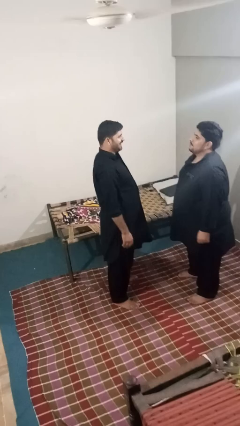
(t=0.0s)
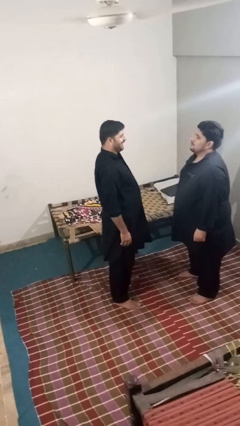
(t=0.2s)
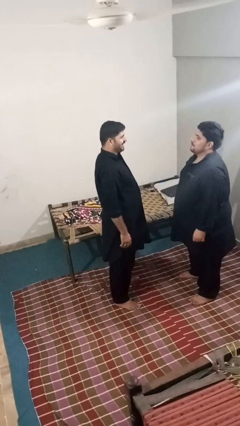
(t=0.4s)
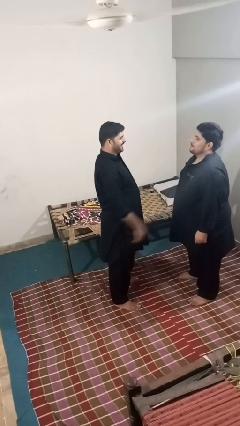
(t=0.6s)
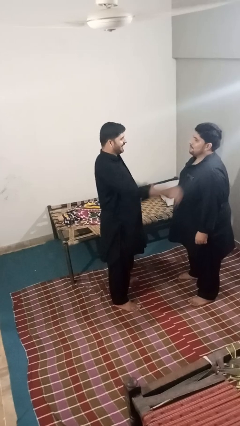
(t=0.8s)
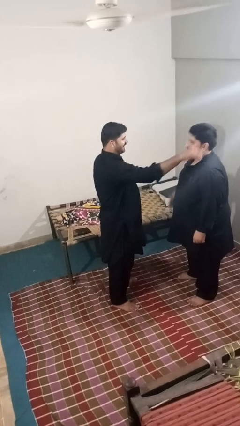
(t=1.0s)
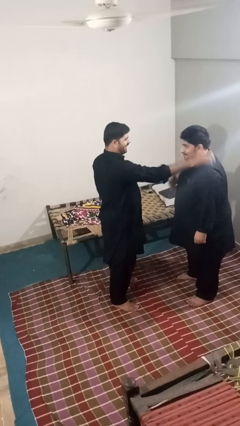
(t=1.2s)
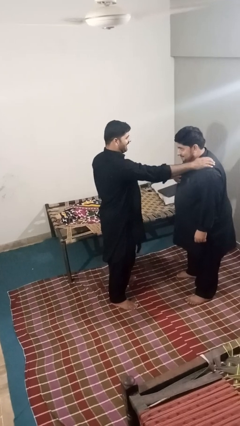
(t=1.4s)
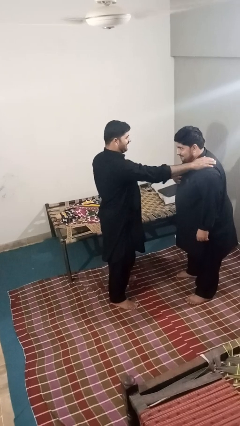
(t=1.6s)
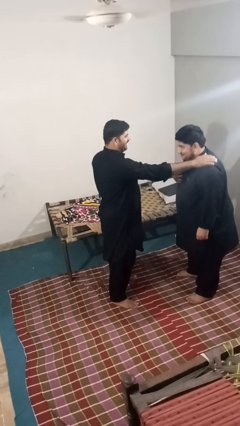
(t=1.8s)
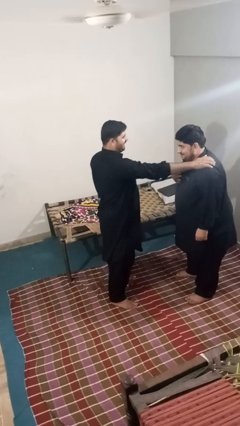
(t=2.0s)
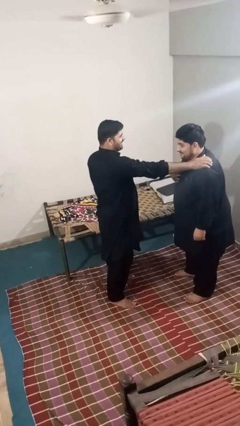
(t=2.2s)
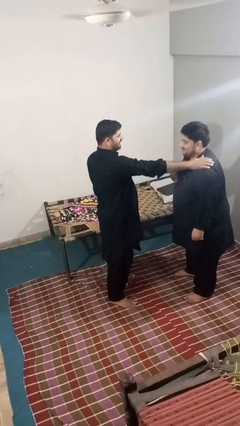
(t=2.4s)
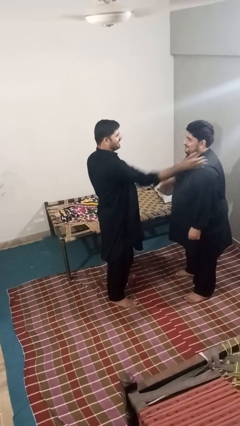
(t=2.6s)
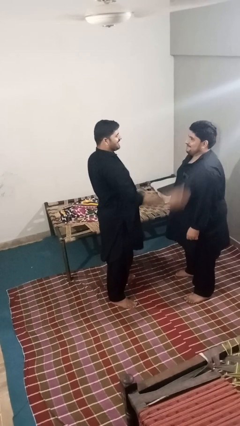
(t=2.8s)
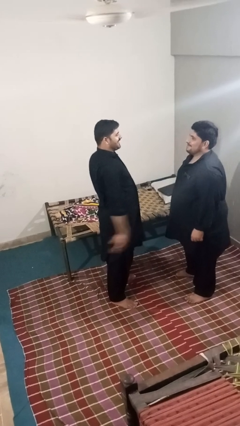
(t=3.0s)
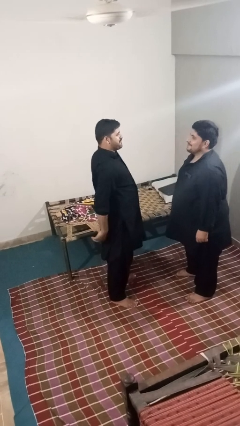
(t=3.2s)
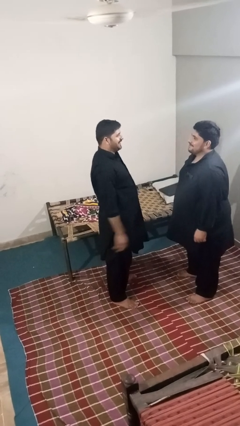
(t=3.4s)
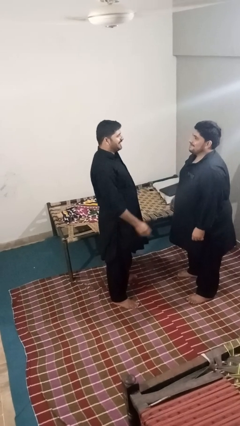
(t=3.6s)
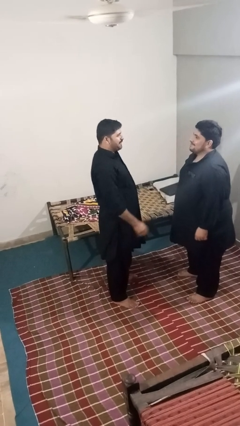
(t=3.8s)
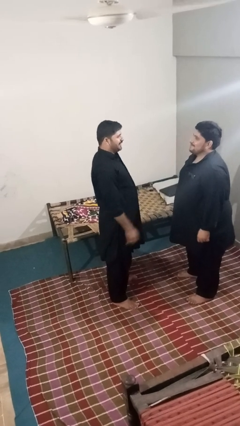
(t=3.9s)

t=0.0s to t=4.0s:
person pounds shoulders of person

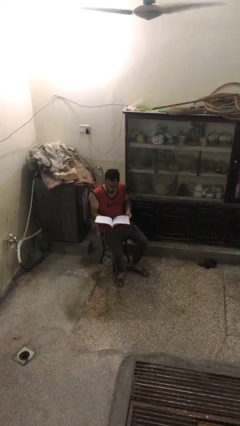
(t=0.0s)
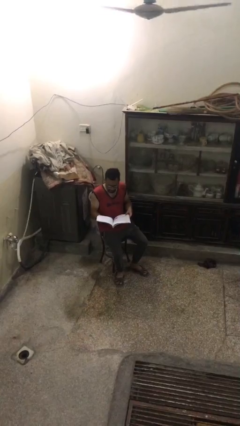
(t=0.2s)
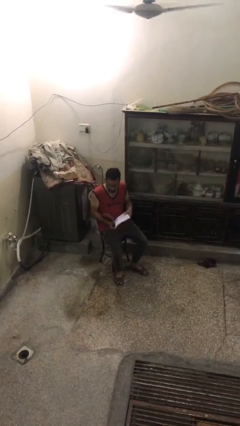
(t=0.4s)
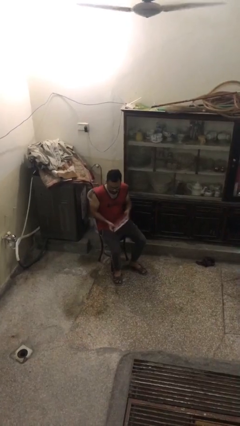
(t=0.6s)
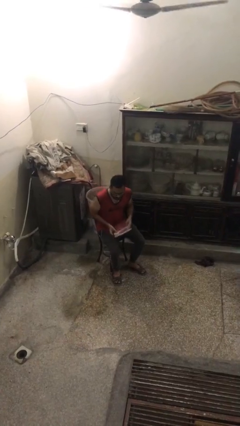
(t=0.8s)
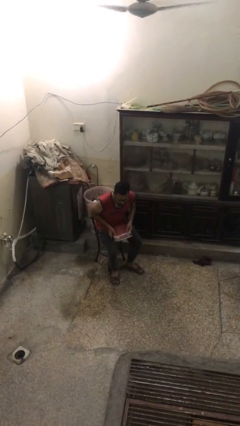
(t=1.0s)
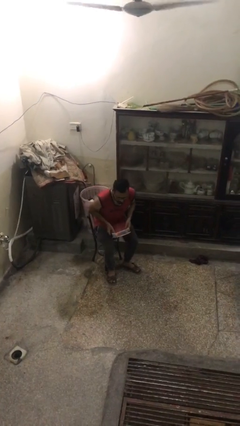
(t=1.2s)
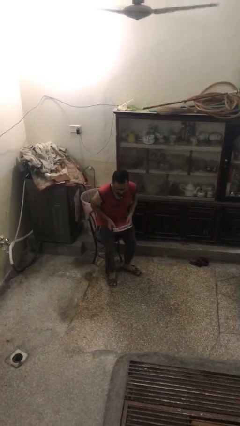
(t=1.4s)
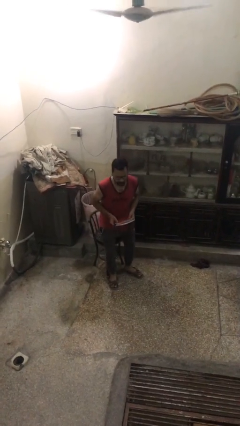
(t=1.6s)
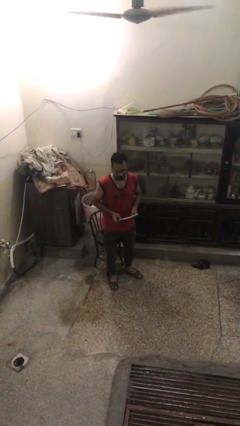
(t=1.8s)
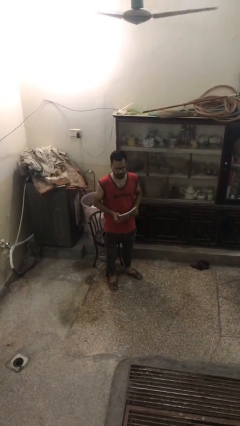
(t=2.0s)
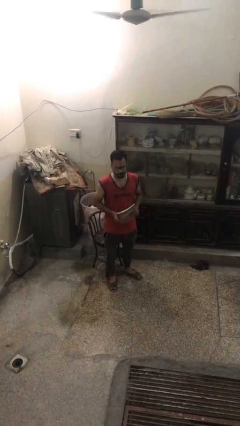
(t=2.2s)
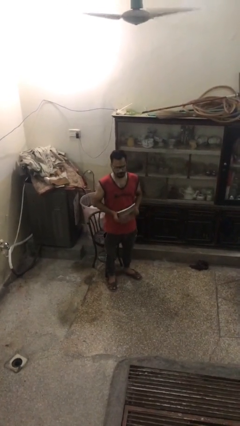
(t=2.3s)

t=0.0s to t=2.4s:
person stands up

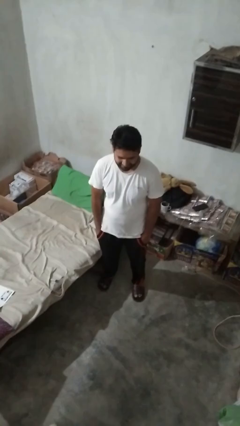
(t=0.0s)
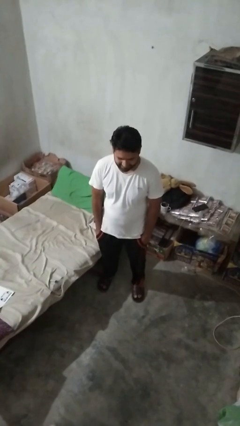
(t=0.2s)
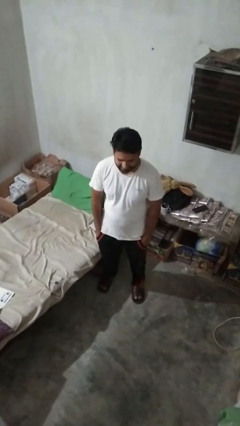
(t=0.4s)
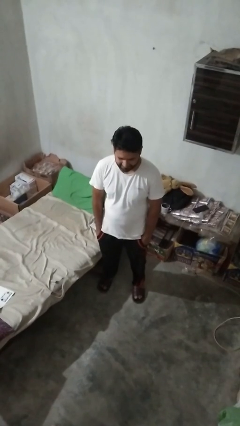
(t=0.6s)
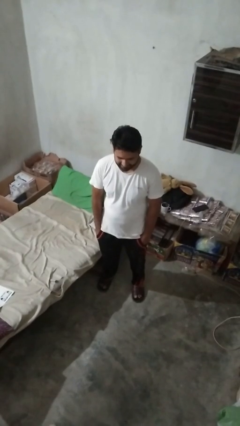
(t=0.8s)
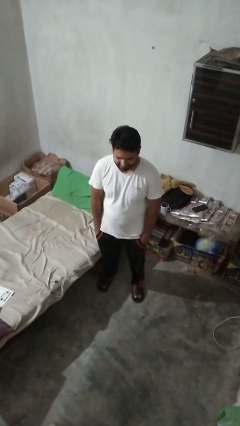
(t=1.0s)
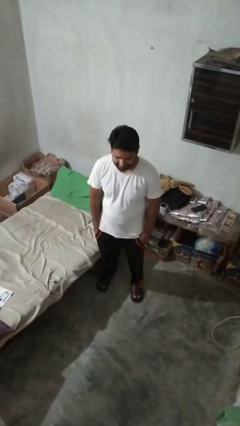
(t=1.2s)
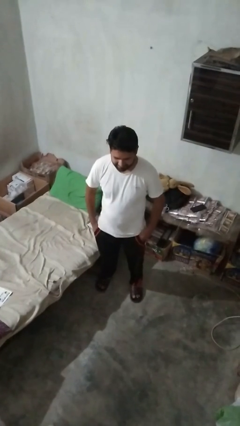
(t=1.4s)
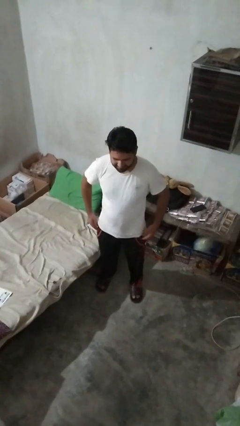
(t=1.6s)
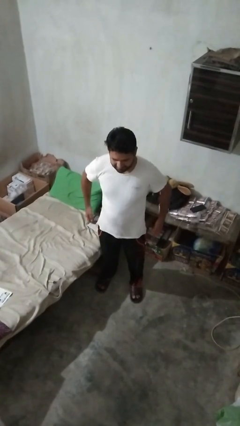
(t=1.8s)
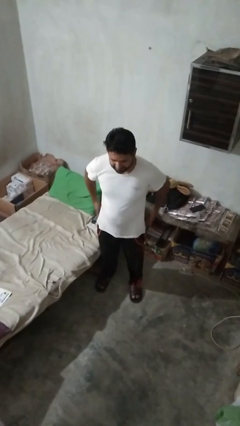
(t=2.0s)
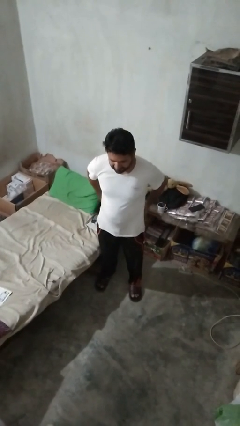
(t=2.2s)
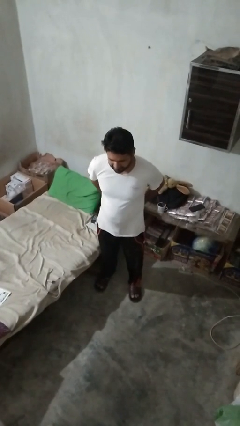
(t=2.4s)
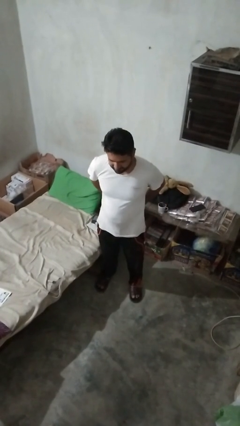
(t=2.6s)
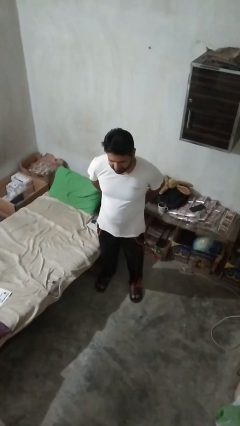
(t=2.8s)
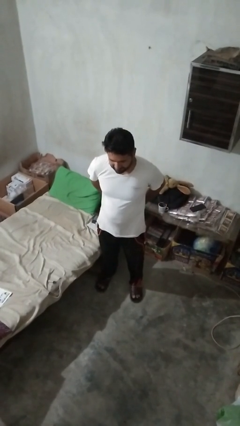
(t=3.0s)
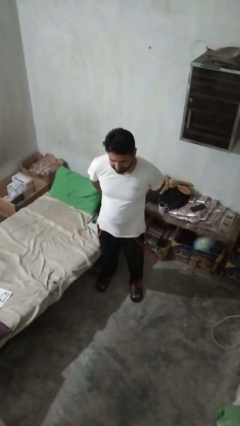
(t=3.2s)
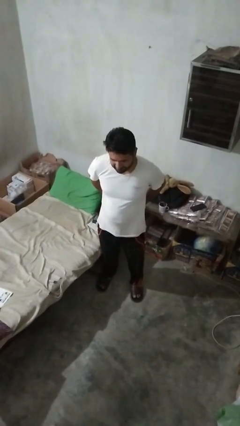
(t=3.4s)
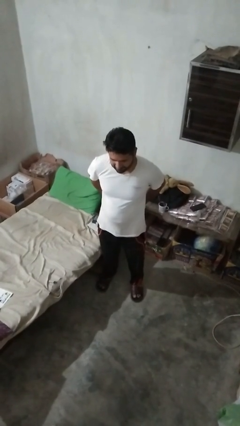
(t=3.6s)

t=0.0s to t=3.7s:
person puts hands in back pockets

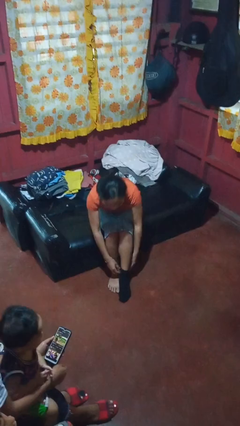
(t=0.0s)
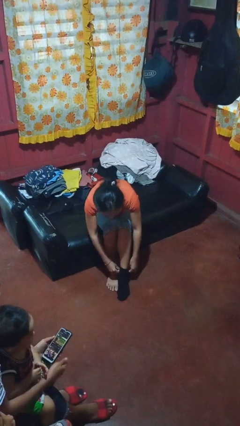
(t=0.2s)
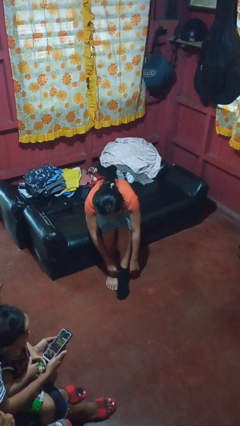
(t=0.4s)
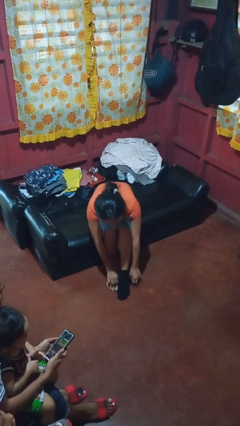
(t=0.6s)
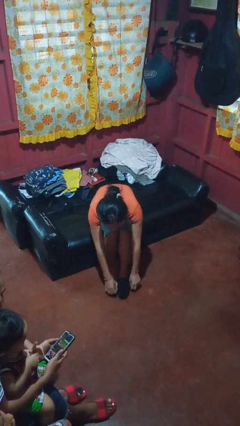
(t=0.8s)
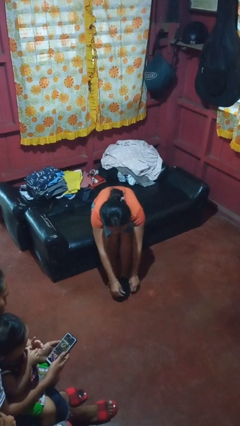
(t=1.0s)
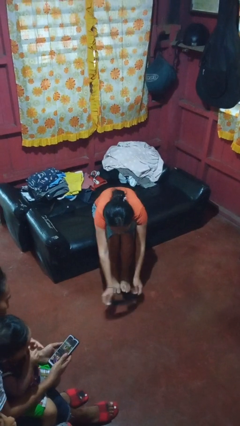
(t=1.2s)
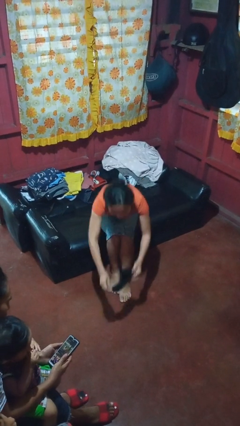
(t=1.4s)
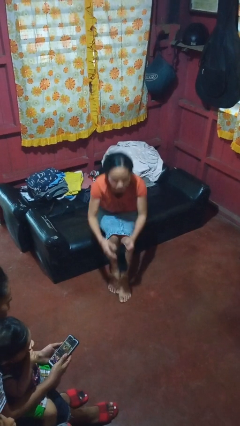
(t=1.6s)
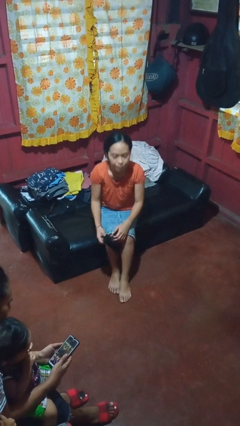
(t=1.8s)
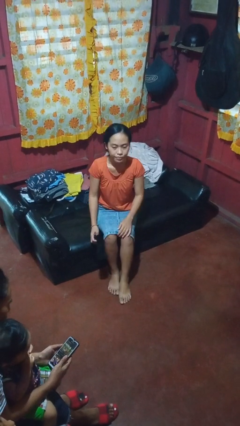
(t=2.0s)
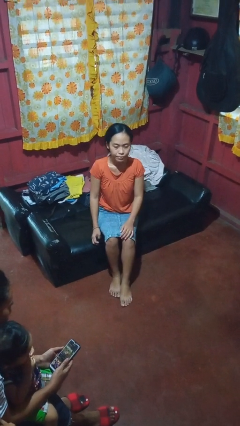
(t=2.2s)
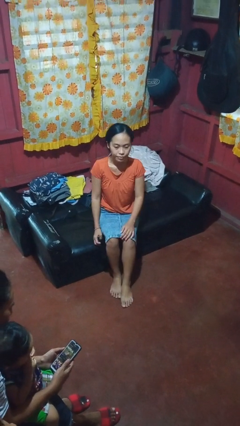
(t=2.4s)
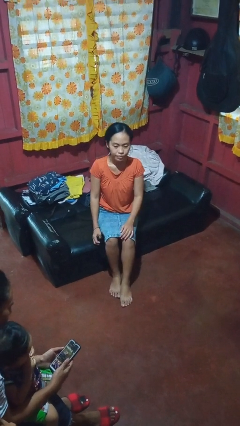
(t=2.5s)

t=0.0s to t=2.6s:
person takes off socks

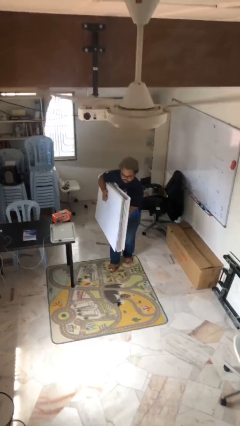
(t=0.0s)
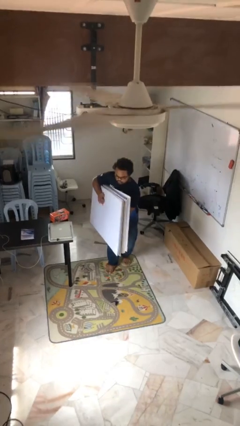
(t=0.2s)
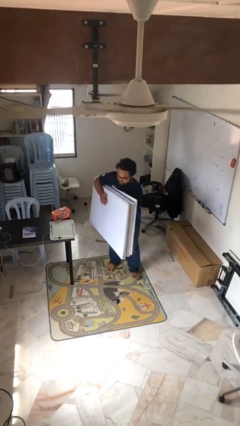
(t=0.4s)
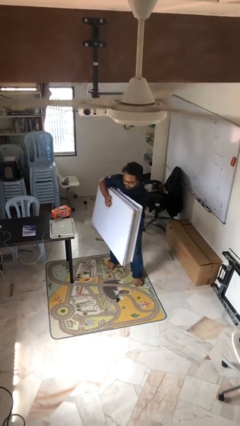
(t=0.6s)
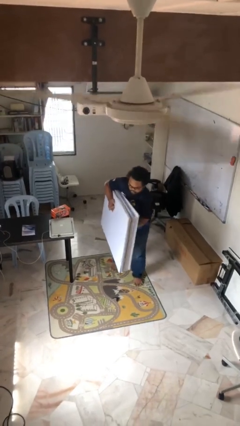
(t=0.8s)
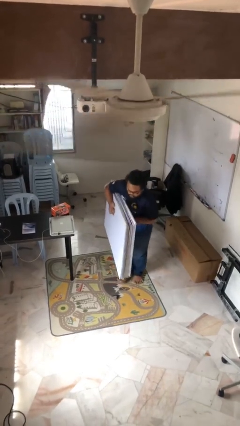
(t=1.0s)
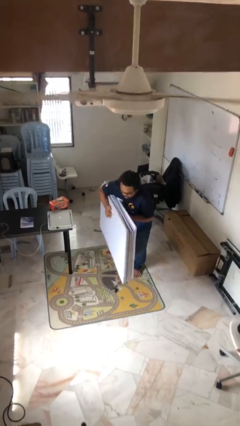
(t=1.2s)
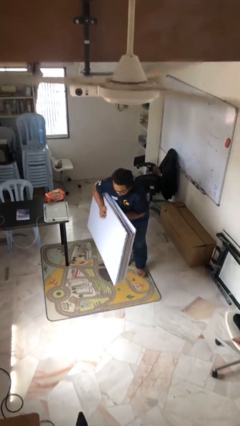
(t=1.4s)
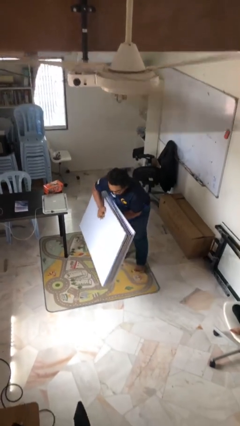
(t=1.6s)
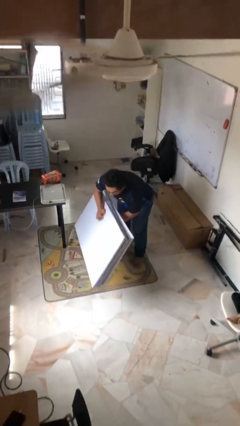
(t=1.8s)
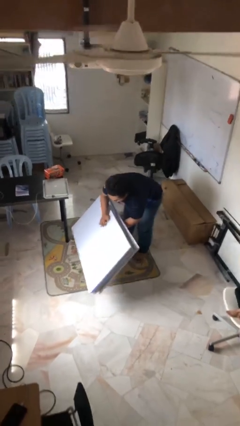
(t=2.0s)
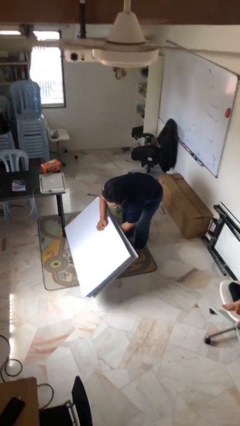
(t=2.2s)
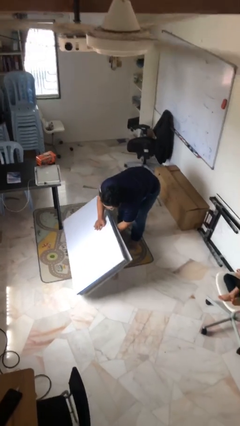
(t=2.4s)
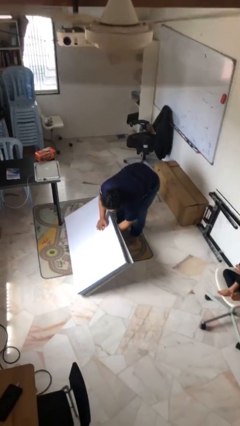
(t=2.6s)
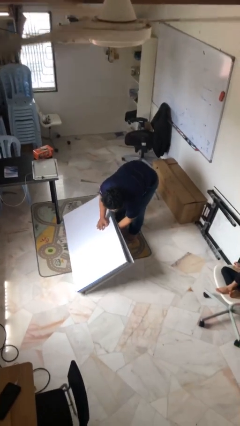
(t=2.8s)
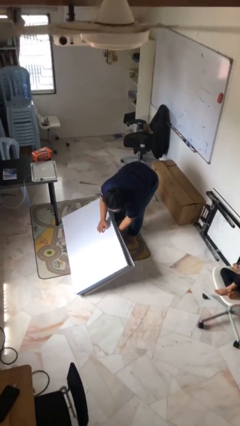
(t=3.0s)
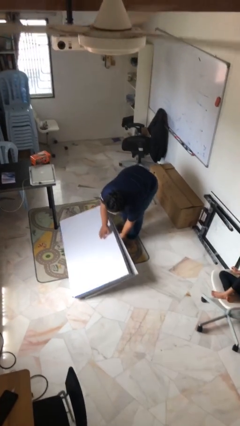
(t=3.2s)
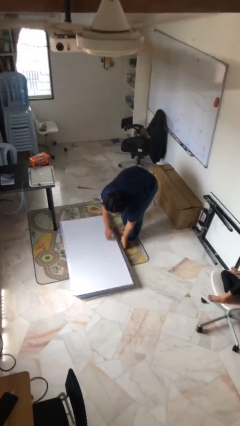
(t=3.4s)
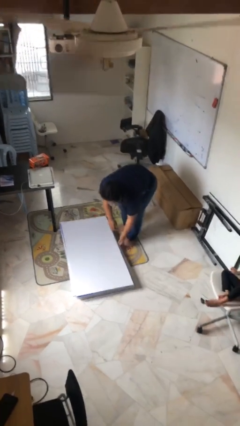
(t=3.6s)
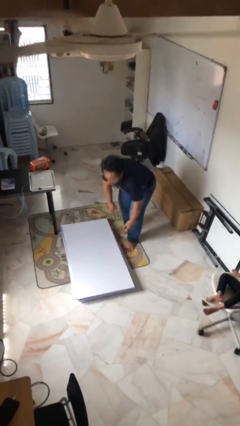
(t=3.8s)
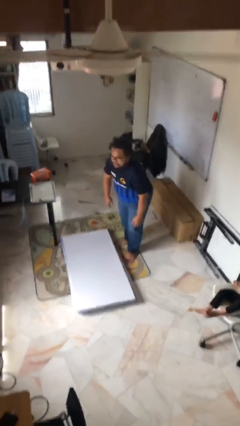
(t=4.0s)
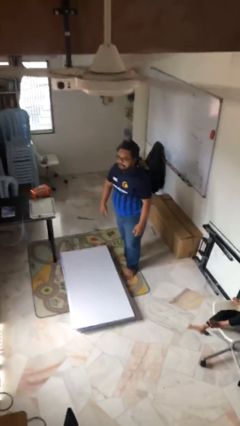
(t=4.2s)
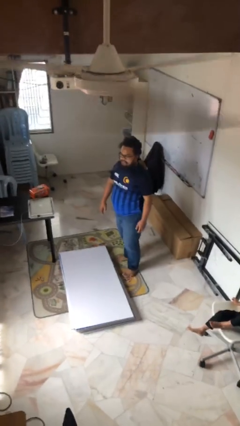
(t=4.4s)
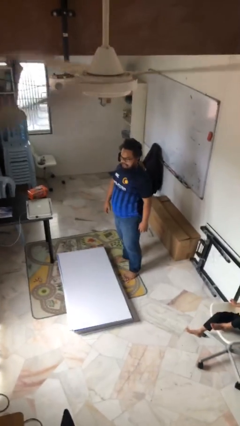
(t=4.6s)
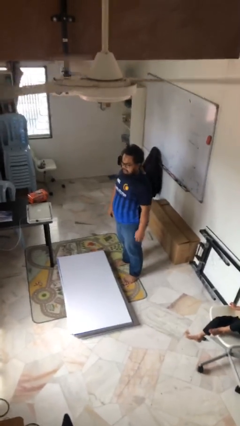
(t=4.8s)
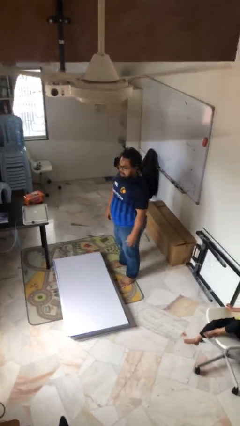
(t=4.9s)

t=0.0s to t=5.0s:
person puts down object on floor
